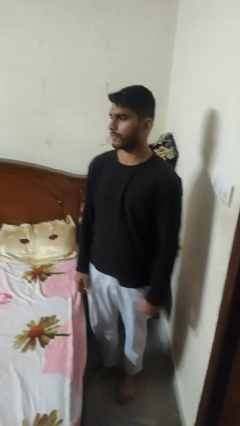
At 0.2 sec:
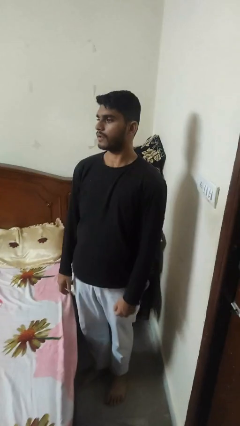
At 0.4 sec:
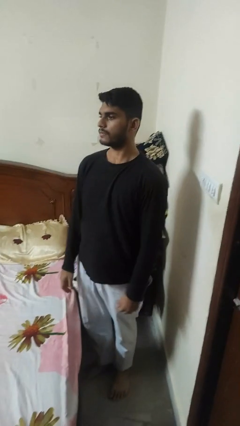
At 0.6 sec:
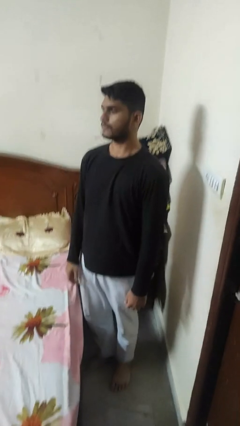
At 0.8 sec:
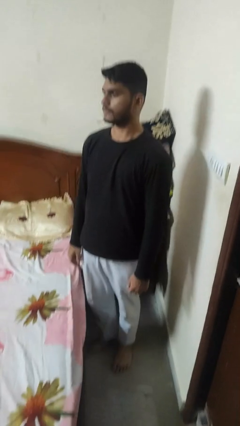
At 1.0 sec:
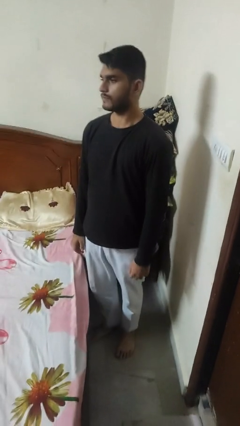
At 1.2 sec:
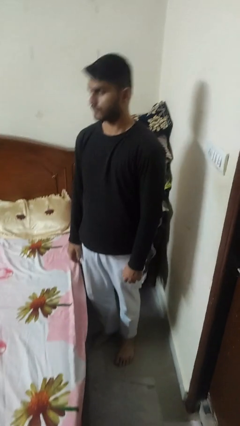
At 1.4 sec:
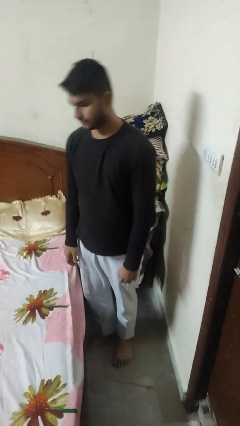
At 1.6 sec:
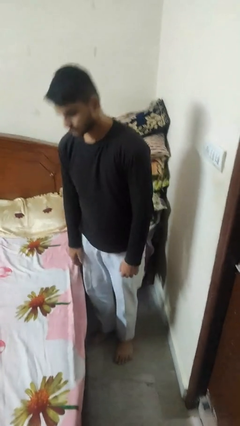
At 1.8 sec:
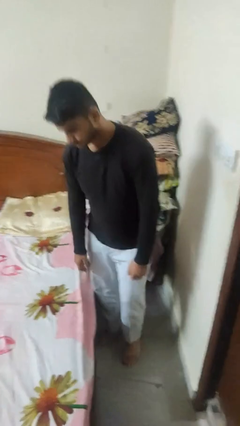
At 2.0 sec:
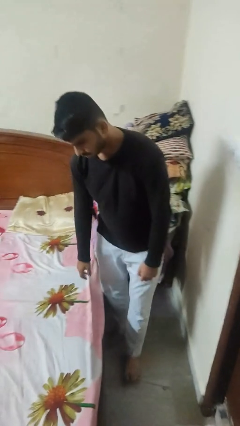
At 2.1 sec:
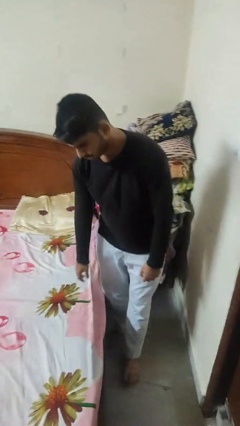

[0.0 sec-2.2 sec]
person stands up

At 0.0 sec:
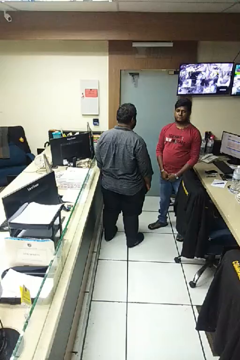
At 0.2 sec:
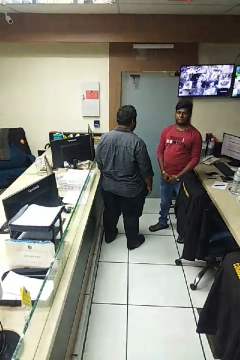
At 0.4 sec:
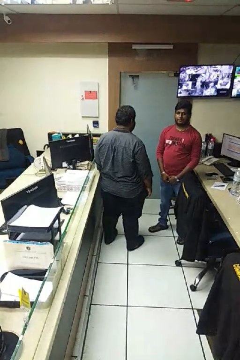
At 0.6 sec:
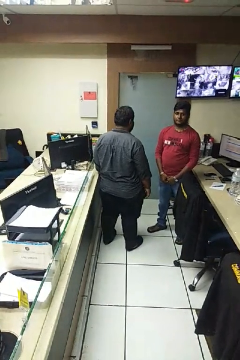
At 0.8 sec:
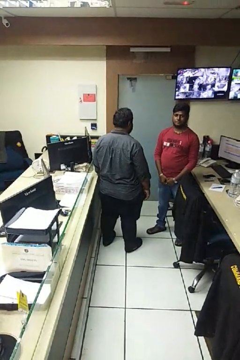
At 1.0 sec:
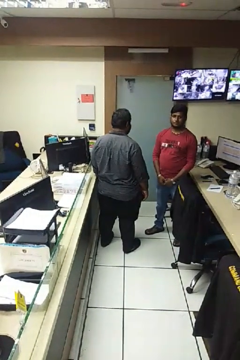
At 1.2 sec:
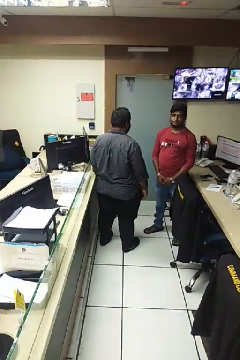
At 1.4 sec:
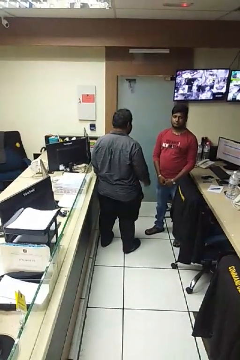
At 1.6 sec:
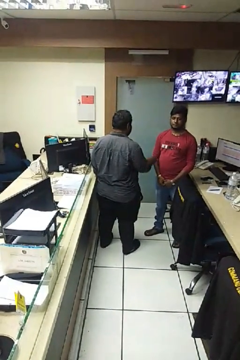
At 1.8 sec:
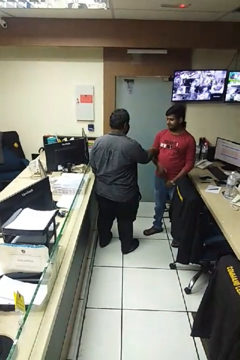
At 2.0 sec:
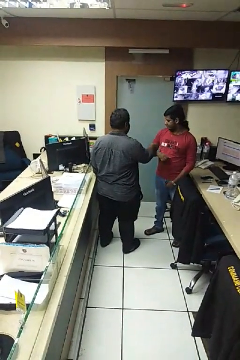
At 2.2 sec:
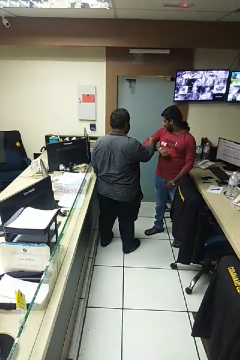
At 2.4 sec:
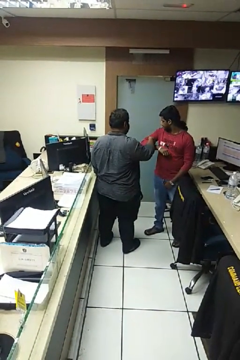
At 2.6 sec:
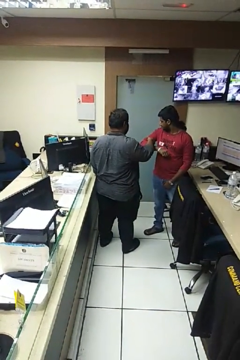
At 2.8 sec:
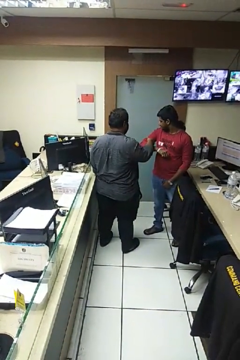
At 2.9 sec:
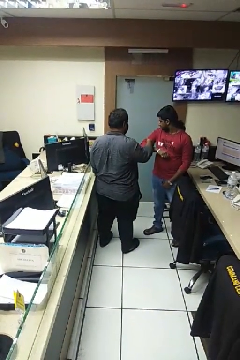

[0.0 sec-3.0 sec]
person grabs person by bicep

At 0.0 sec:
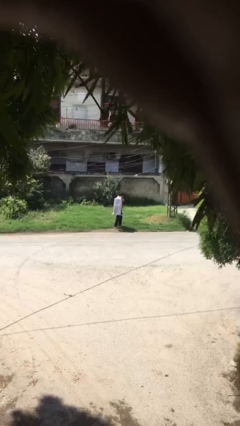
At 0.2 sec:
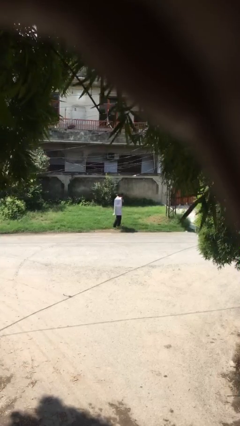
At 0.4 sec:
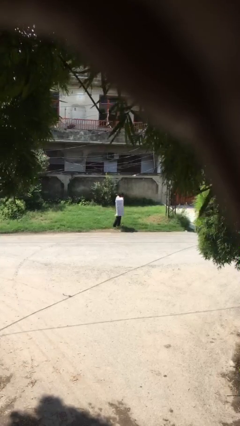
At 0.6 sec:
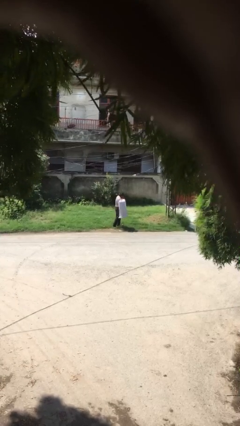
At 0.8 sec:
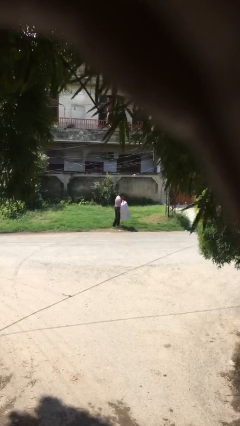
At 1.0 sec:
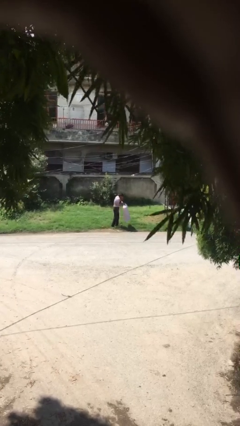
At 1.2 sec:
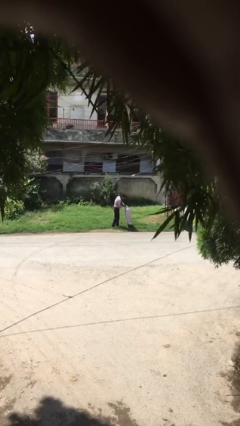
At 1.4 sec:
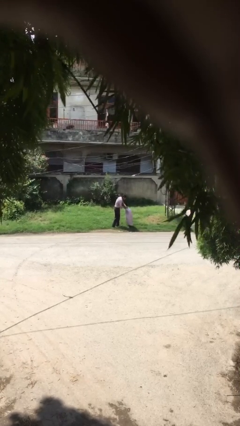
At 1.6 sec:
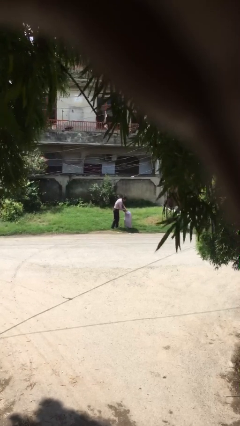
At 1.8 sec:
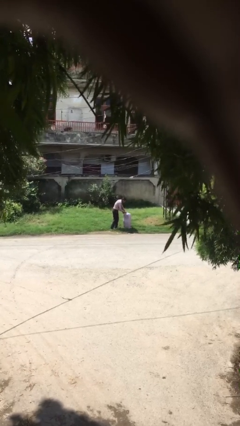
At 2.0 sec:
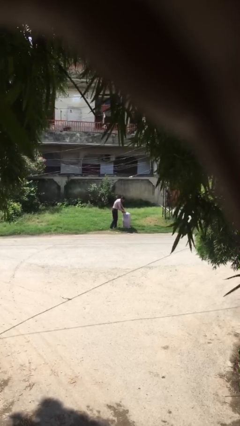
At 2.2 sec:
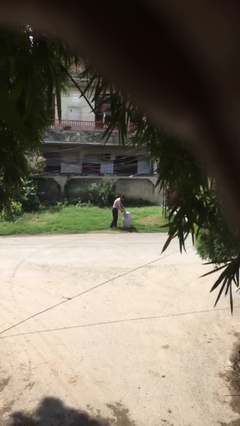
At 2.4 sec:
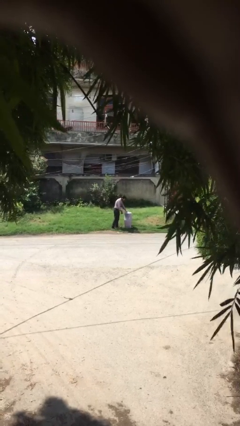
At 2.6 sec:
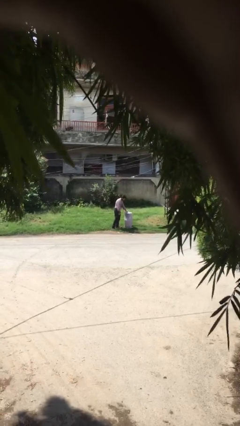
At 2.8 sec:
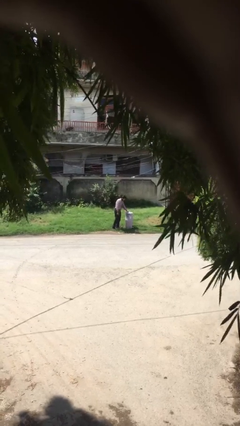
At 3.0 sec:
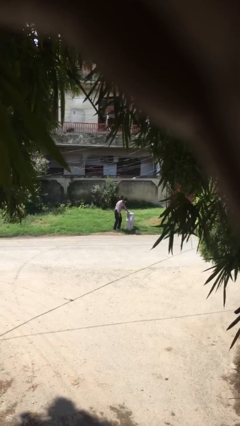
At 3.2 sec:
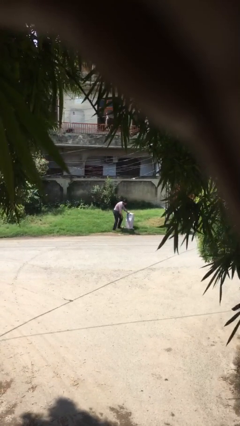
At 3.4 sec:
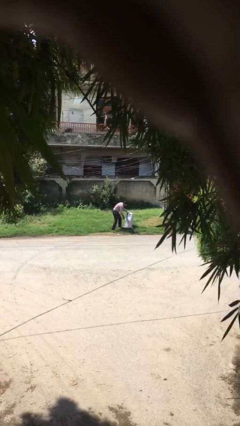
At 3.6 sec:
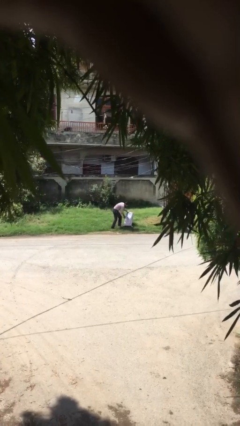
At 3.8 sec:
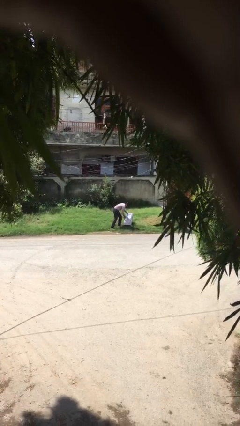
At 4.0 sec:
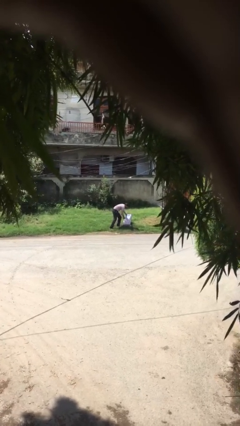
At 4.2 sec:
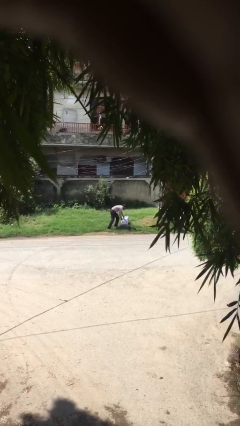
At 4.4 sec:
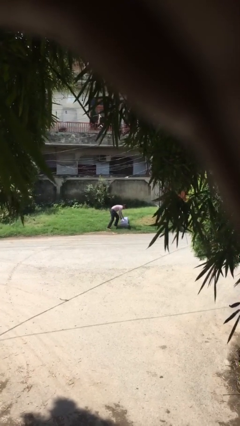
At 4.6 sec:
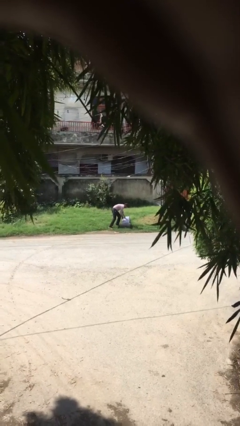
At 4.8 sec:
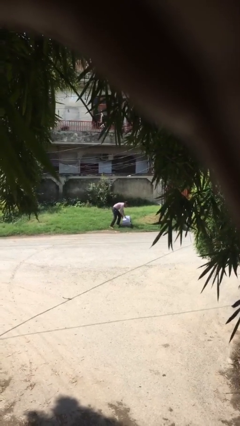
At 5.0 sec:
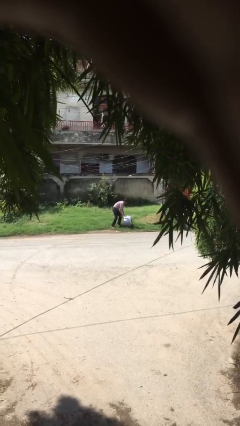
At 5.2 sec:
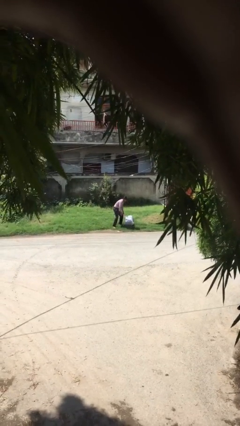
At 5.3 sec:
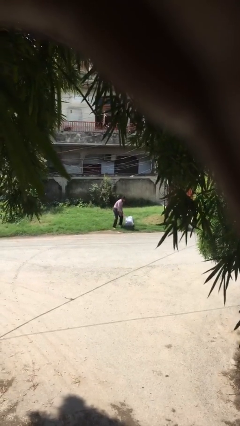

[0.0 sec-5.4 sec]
person puts down object on floor

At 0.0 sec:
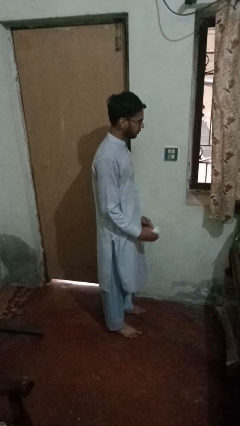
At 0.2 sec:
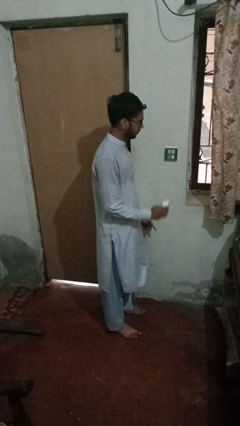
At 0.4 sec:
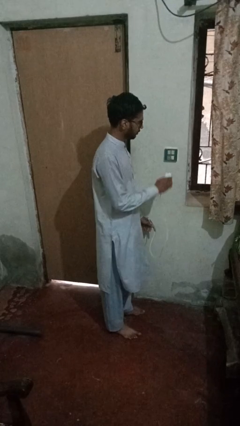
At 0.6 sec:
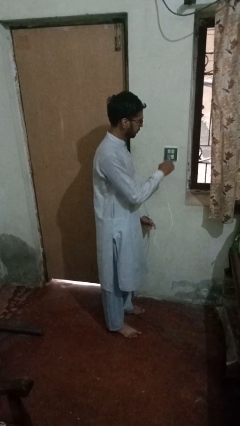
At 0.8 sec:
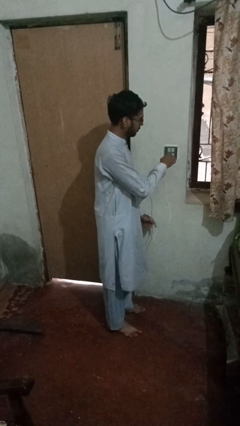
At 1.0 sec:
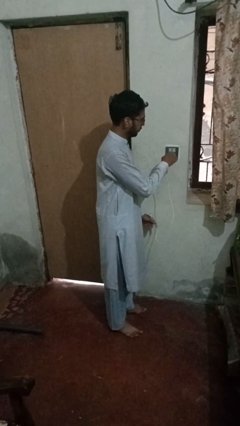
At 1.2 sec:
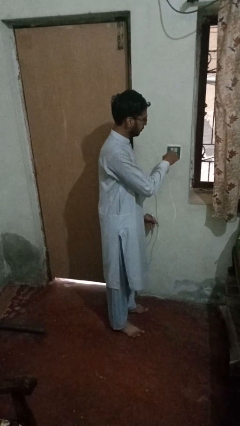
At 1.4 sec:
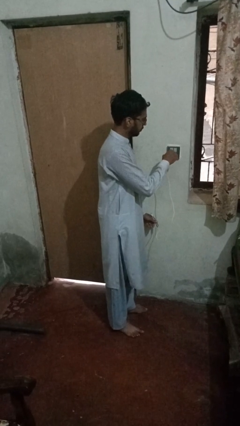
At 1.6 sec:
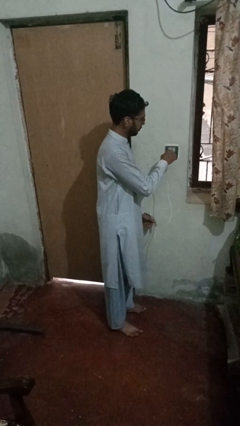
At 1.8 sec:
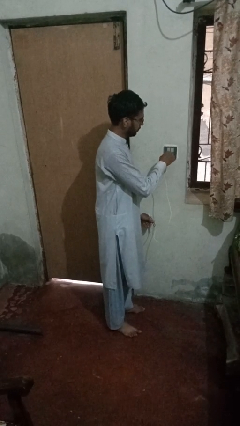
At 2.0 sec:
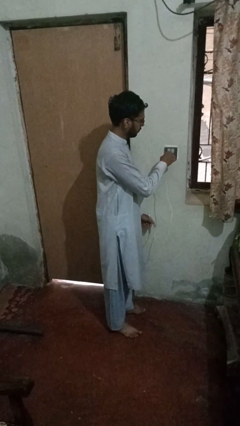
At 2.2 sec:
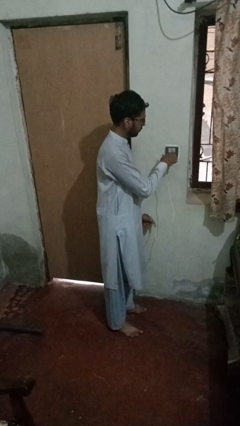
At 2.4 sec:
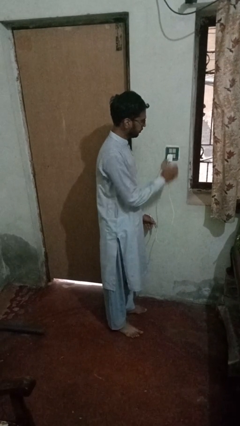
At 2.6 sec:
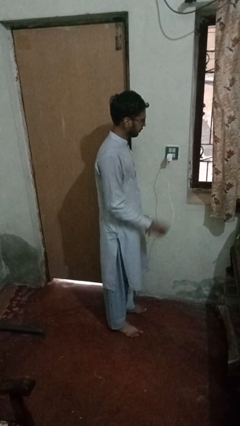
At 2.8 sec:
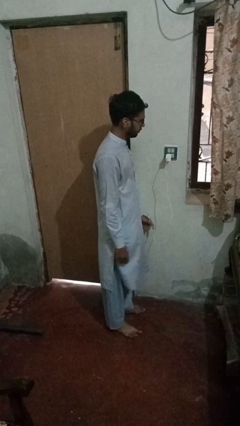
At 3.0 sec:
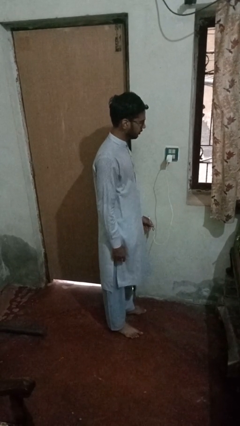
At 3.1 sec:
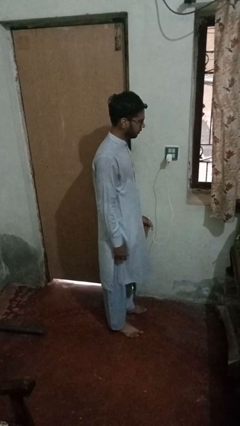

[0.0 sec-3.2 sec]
person plugs into electrical socket

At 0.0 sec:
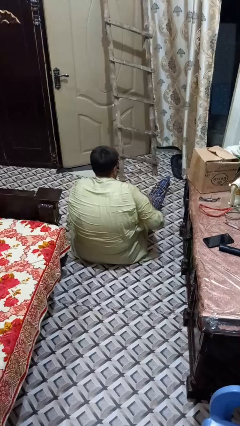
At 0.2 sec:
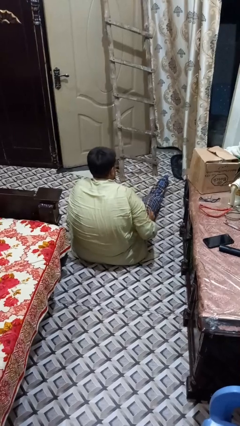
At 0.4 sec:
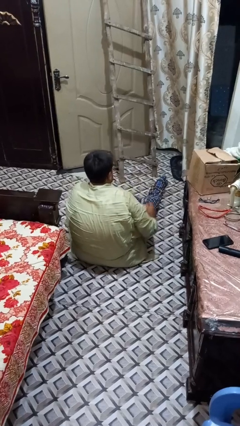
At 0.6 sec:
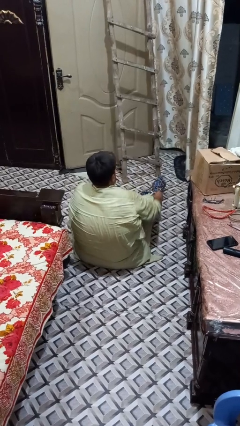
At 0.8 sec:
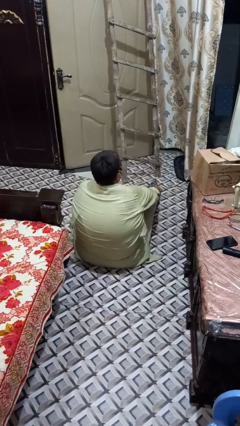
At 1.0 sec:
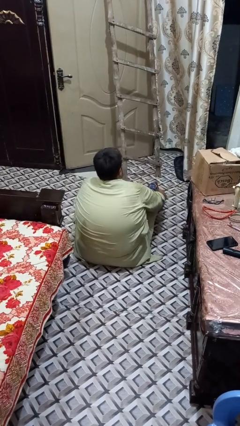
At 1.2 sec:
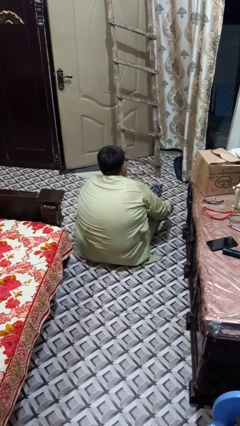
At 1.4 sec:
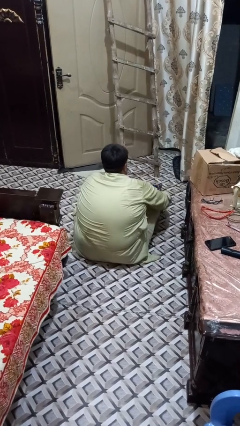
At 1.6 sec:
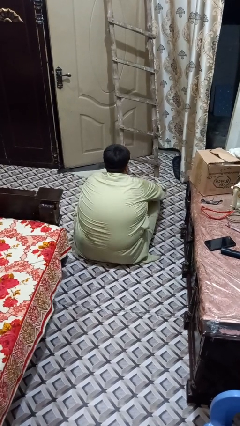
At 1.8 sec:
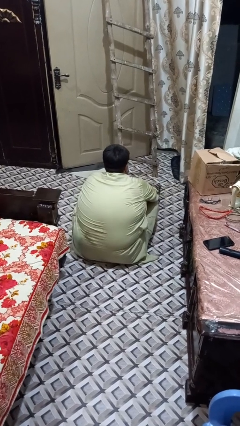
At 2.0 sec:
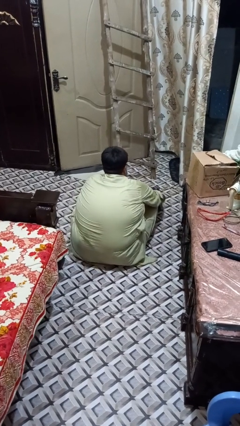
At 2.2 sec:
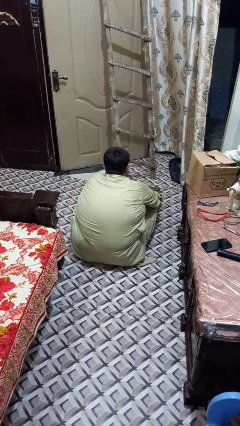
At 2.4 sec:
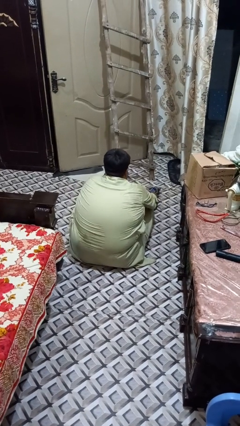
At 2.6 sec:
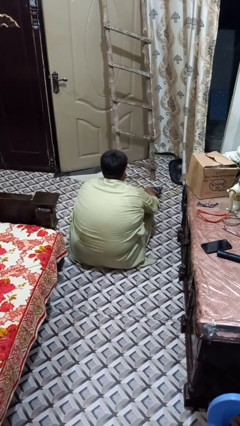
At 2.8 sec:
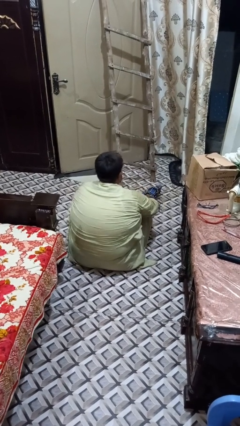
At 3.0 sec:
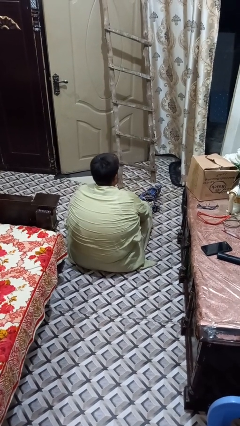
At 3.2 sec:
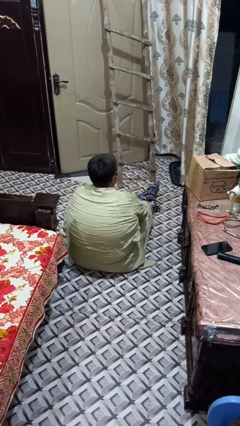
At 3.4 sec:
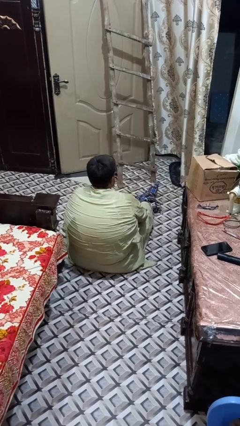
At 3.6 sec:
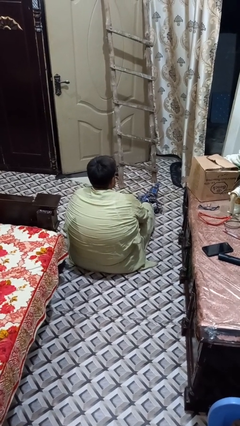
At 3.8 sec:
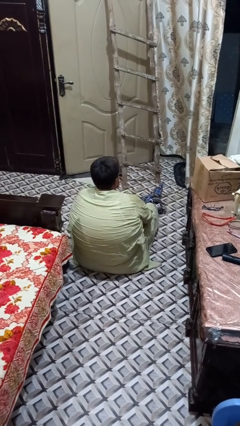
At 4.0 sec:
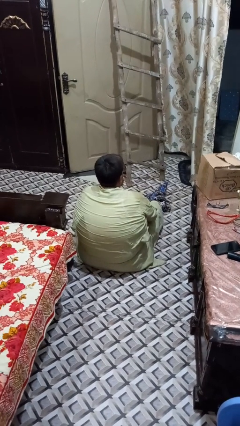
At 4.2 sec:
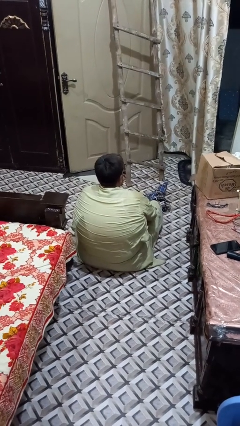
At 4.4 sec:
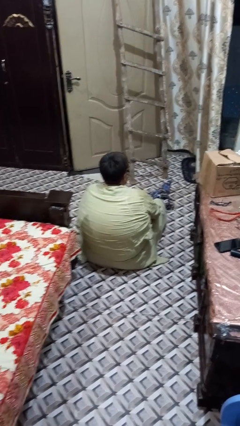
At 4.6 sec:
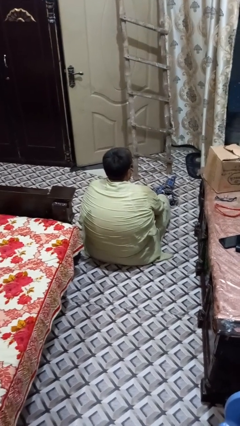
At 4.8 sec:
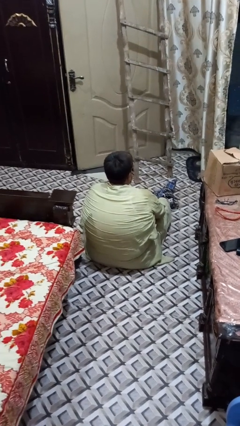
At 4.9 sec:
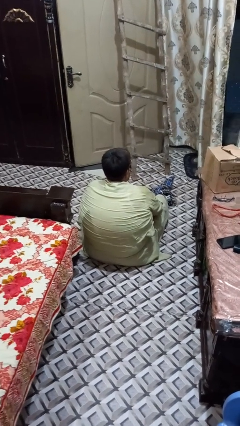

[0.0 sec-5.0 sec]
person takes off pants
